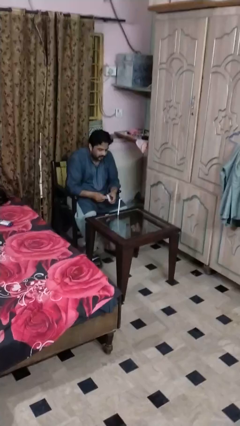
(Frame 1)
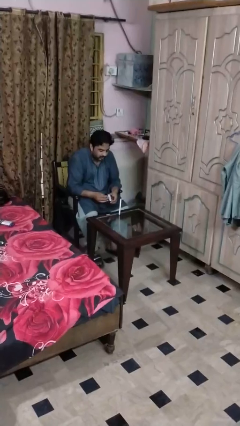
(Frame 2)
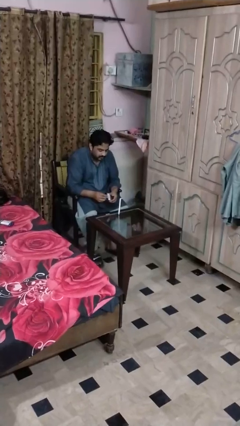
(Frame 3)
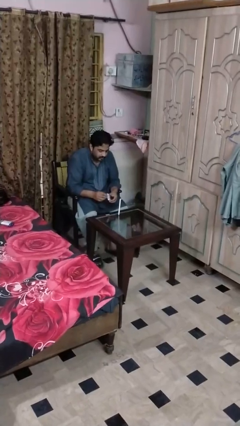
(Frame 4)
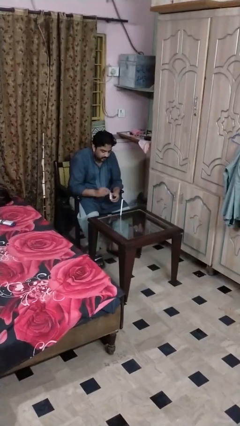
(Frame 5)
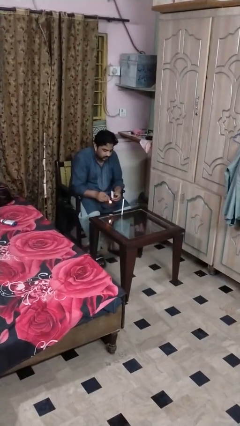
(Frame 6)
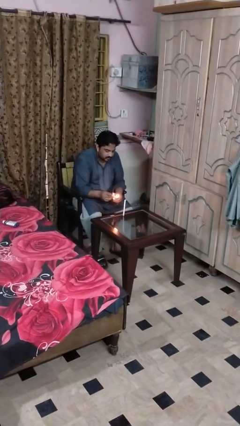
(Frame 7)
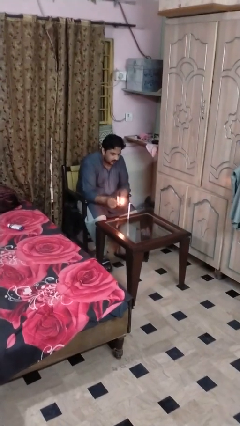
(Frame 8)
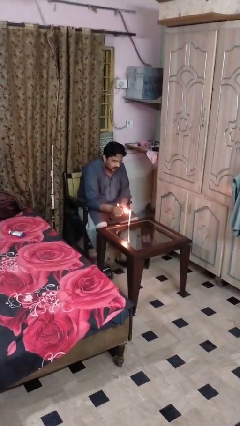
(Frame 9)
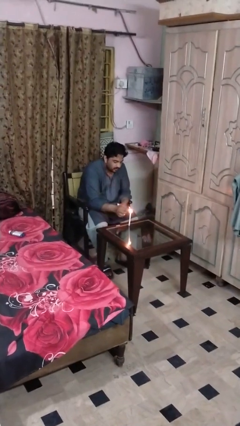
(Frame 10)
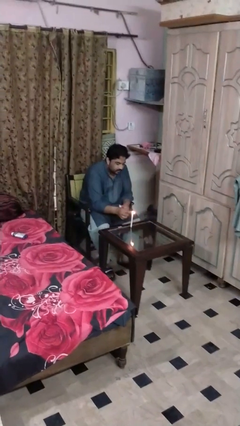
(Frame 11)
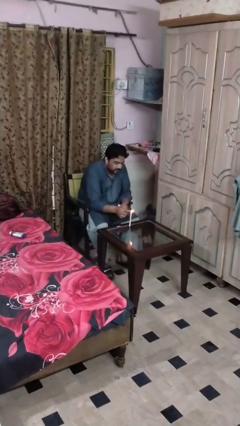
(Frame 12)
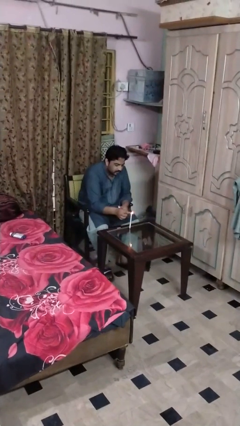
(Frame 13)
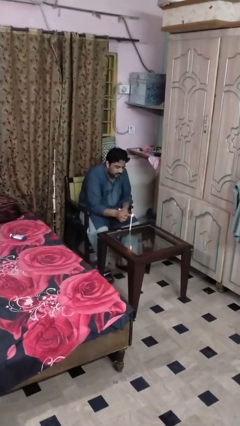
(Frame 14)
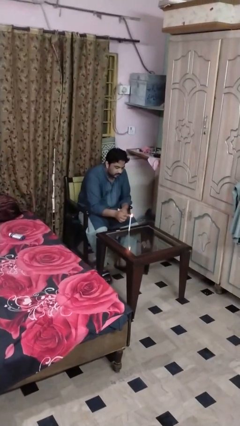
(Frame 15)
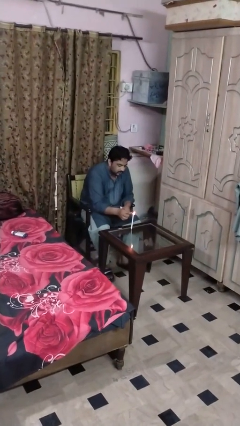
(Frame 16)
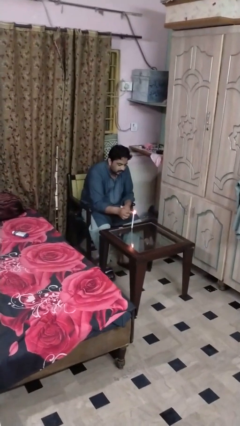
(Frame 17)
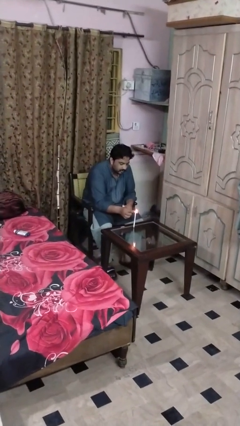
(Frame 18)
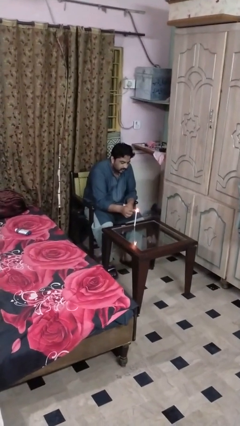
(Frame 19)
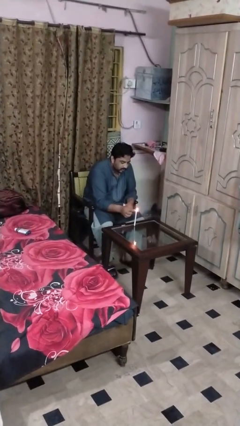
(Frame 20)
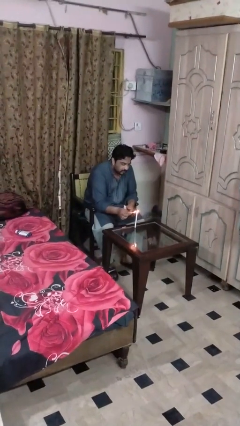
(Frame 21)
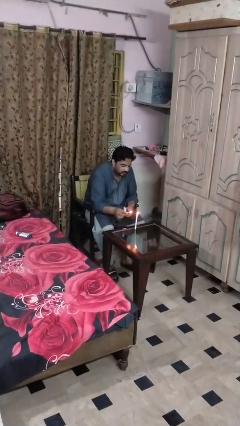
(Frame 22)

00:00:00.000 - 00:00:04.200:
person lights candle

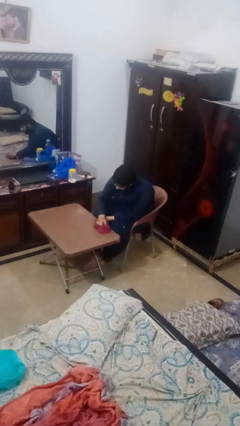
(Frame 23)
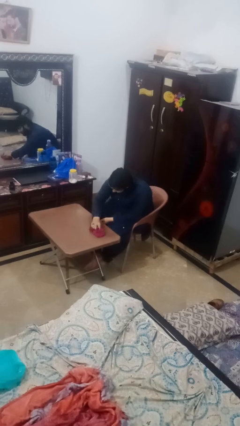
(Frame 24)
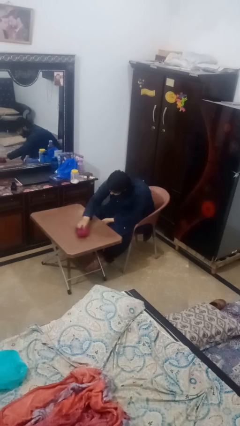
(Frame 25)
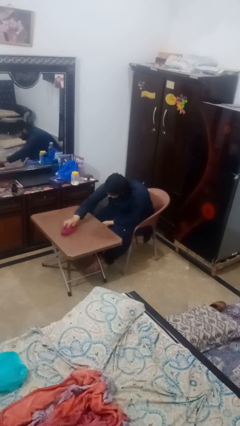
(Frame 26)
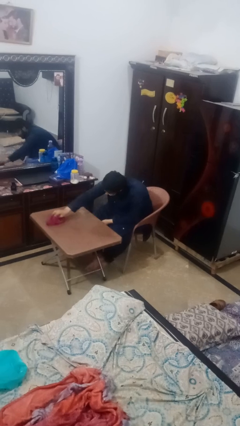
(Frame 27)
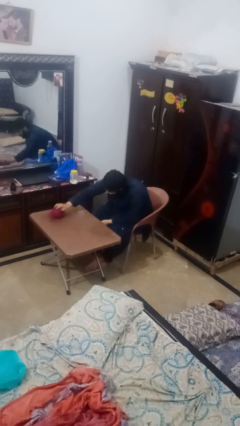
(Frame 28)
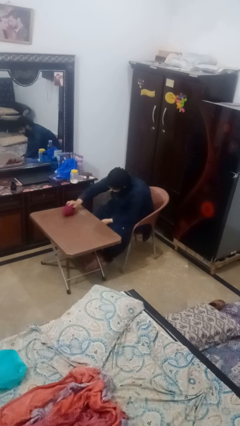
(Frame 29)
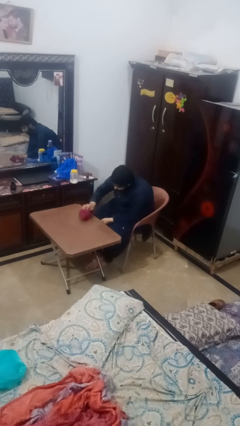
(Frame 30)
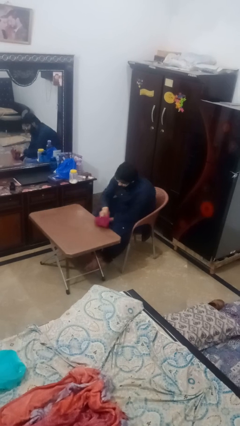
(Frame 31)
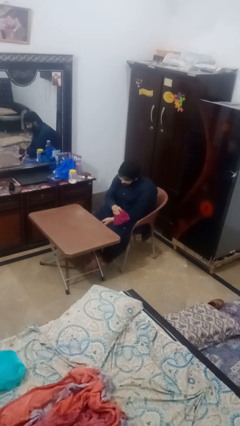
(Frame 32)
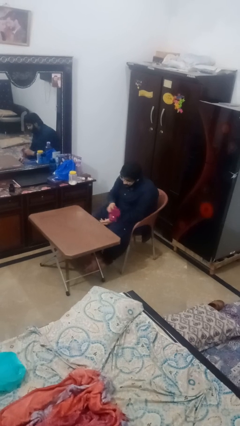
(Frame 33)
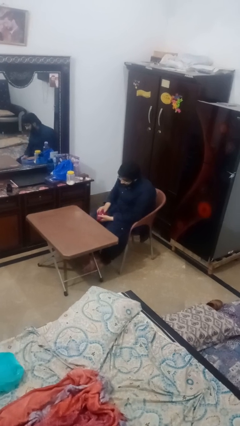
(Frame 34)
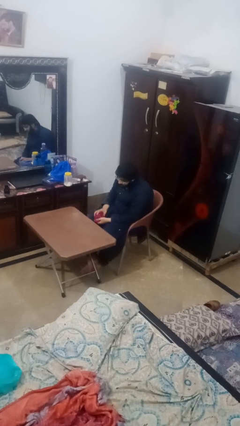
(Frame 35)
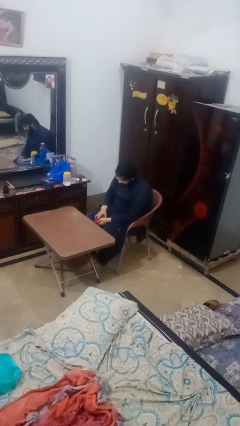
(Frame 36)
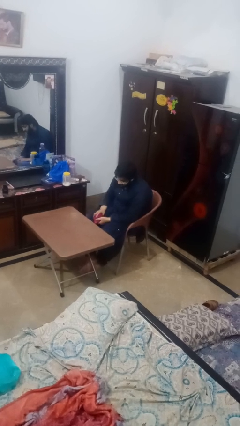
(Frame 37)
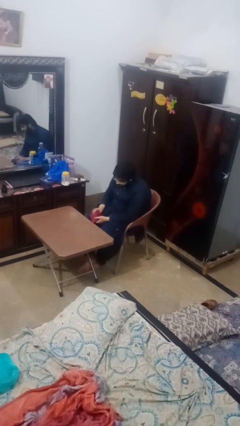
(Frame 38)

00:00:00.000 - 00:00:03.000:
person cleans table with rag

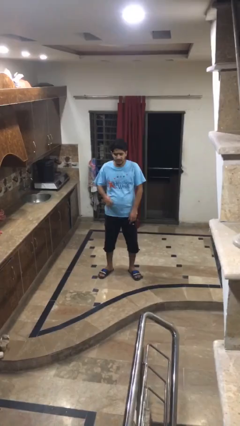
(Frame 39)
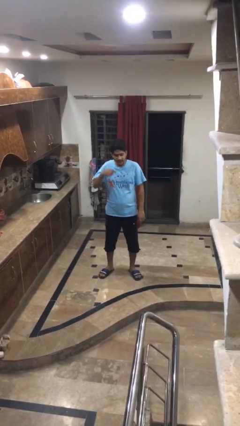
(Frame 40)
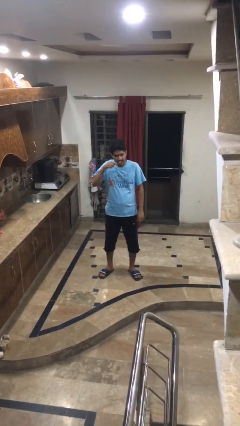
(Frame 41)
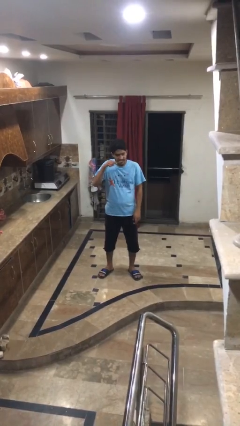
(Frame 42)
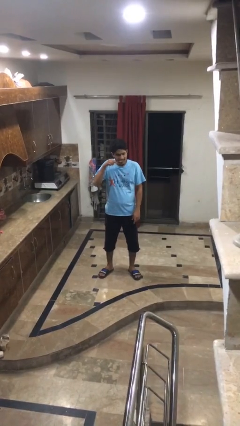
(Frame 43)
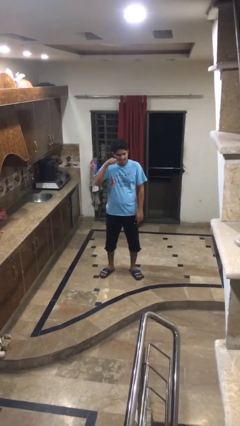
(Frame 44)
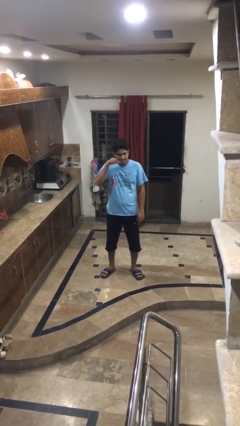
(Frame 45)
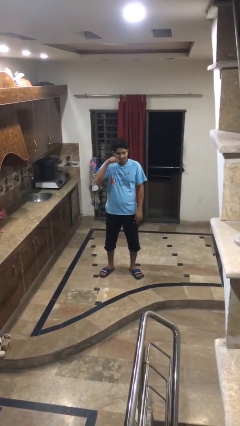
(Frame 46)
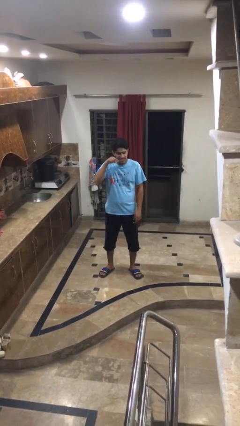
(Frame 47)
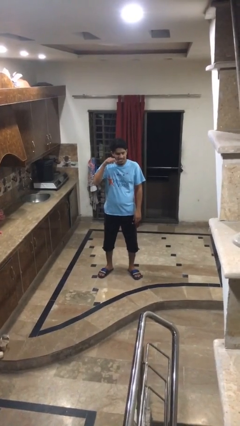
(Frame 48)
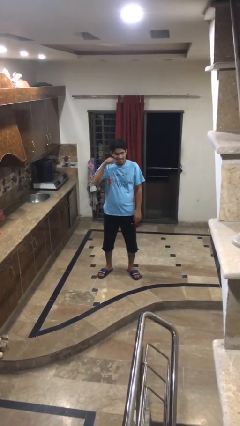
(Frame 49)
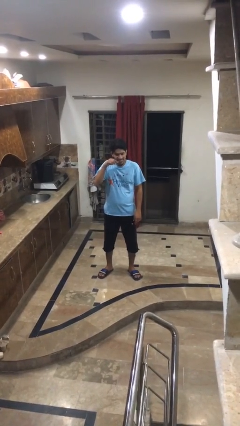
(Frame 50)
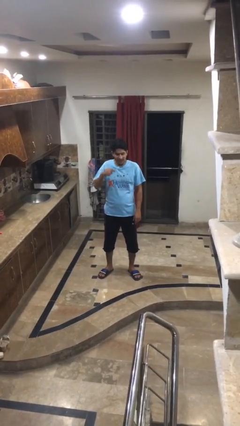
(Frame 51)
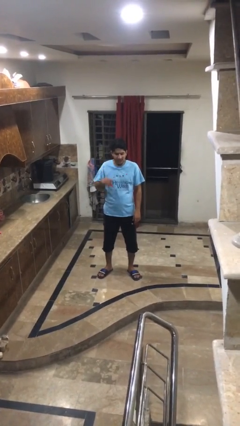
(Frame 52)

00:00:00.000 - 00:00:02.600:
person brushes teeth

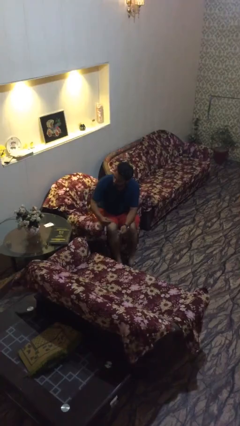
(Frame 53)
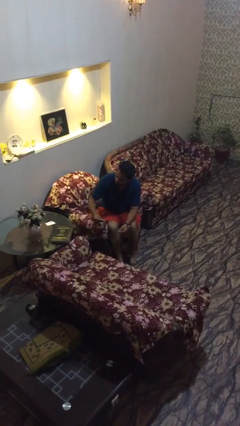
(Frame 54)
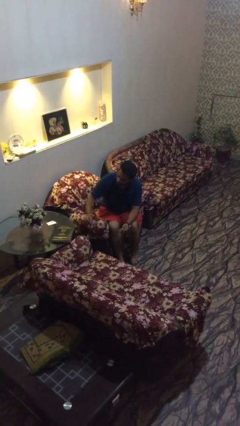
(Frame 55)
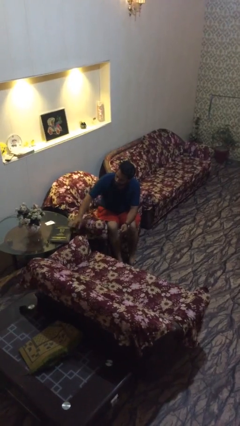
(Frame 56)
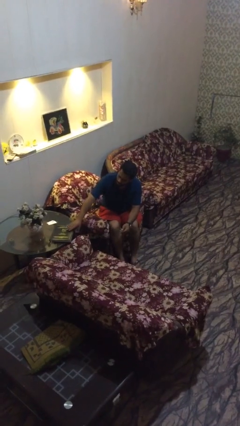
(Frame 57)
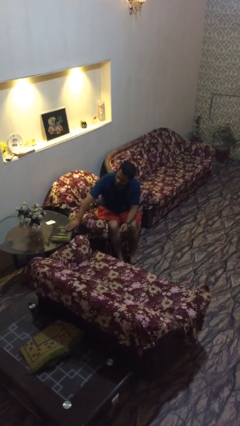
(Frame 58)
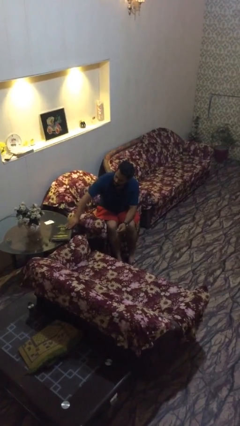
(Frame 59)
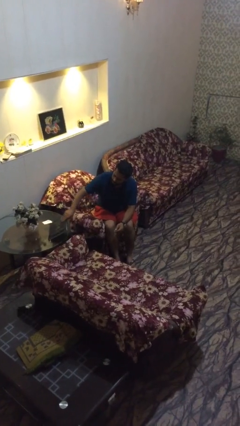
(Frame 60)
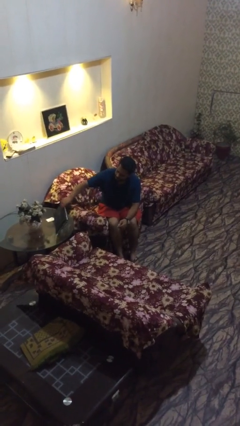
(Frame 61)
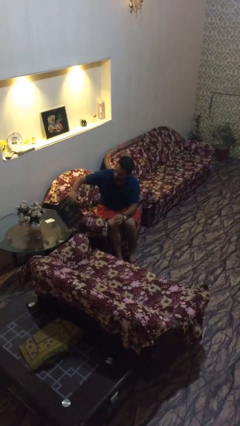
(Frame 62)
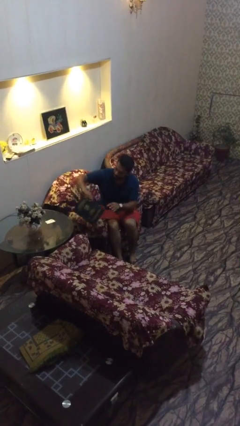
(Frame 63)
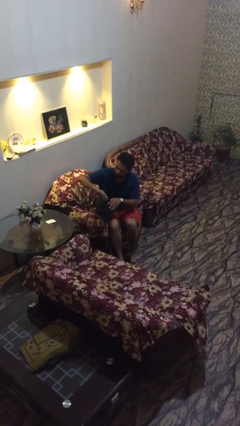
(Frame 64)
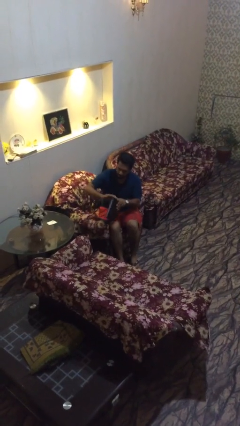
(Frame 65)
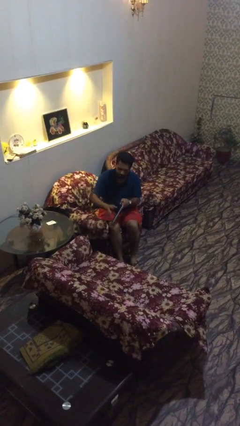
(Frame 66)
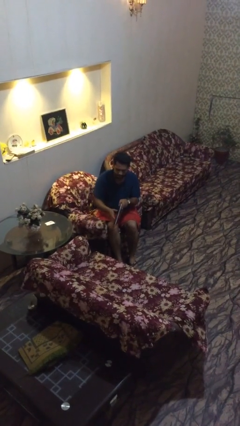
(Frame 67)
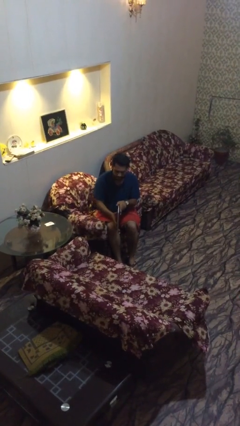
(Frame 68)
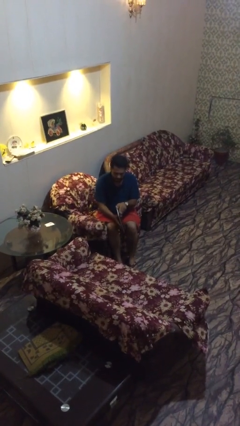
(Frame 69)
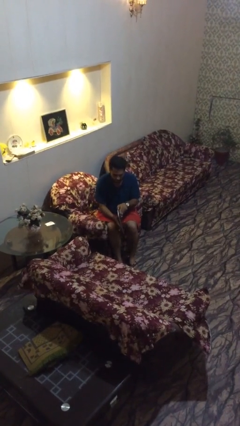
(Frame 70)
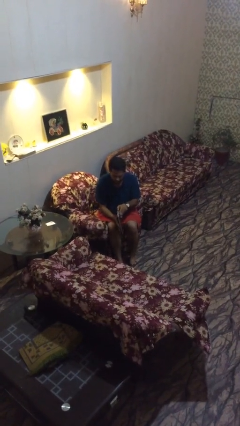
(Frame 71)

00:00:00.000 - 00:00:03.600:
person picks up object from table

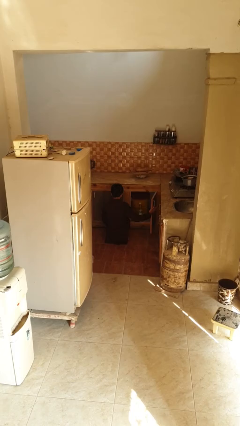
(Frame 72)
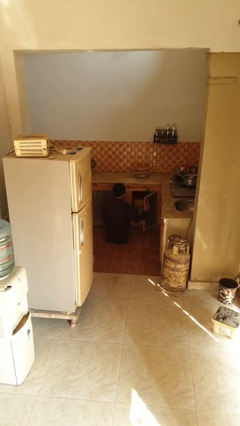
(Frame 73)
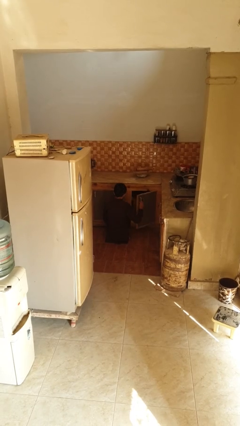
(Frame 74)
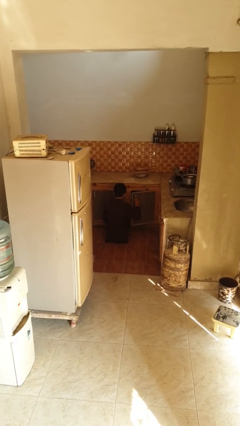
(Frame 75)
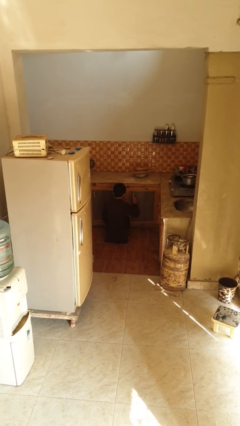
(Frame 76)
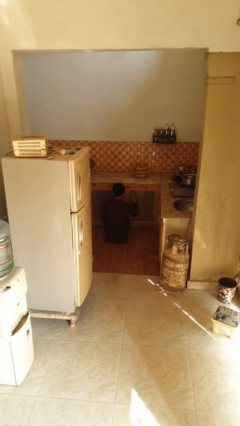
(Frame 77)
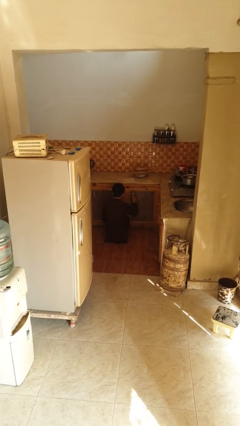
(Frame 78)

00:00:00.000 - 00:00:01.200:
person closes kitchen drawer

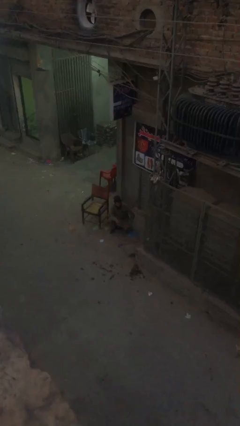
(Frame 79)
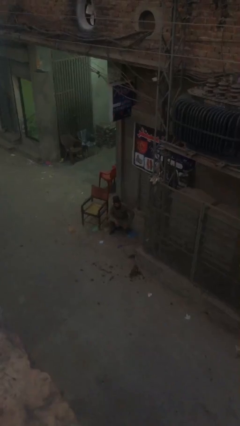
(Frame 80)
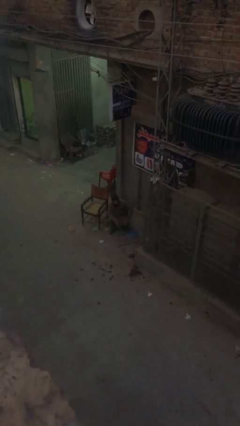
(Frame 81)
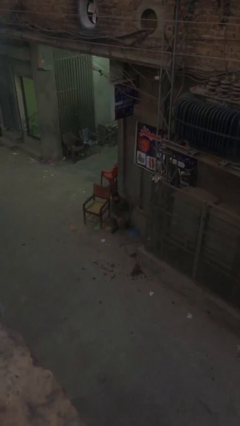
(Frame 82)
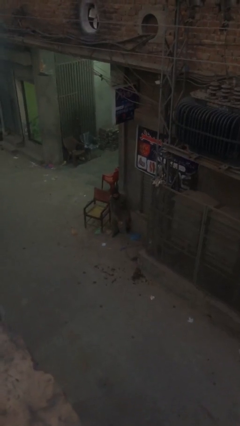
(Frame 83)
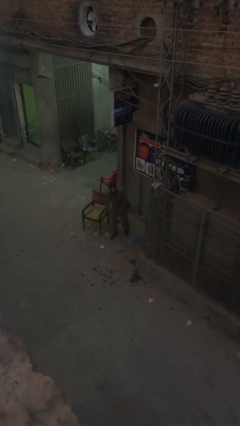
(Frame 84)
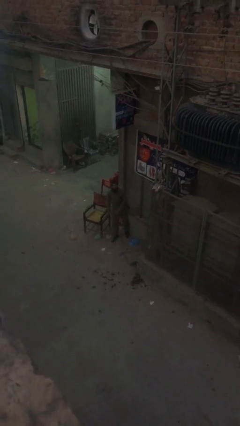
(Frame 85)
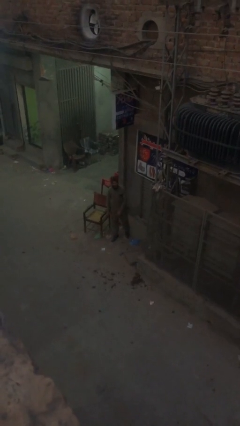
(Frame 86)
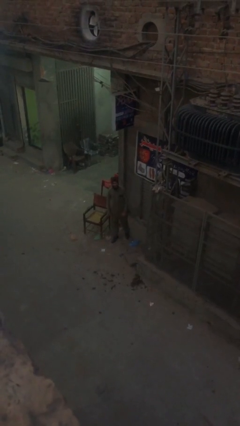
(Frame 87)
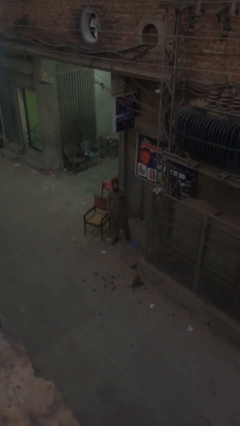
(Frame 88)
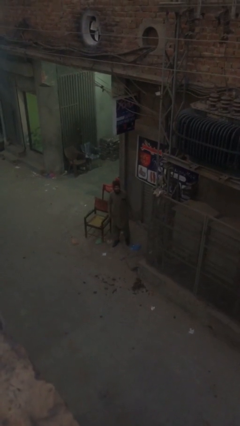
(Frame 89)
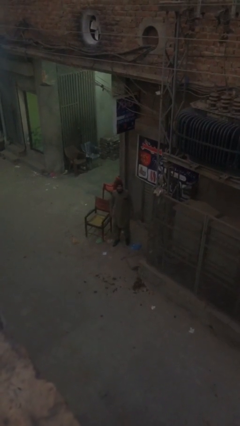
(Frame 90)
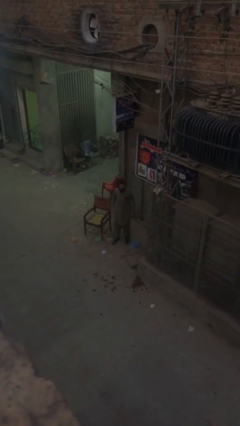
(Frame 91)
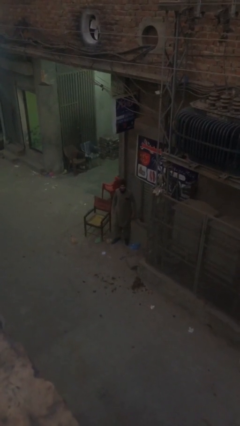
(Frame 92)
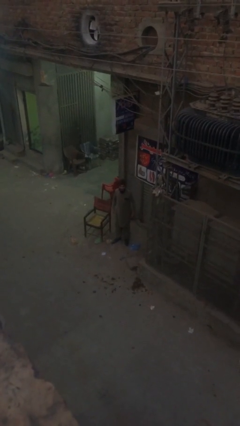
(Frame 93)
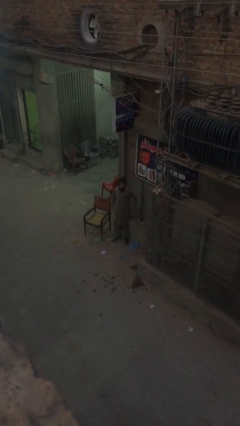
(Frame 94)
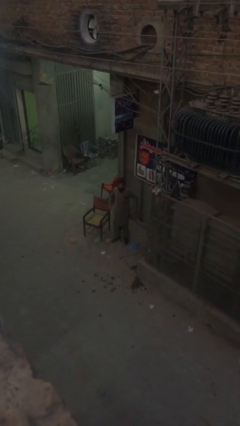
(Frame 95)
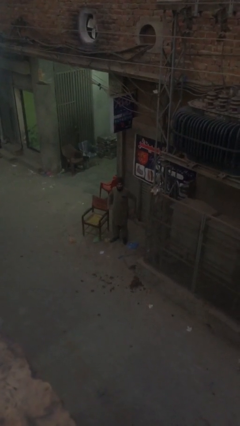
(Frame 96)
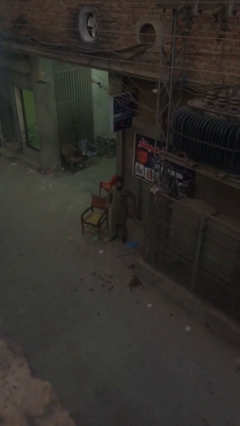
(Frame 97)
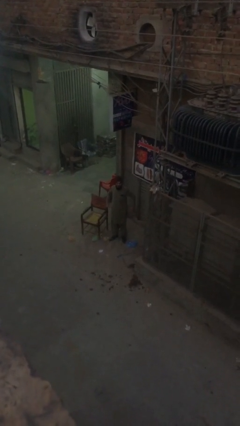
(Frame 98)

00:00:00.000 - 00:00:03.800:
person stands up
